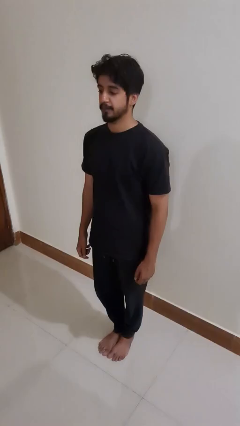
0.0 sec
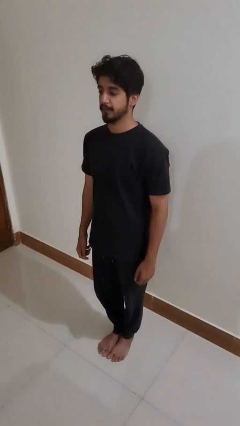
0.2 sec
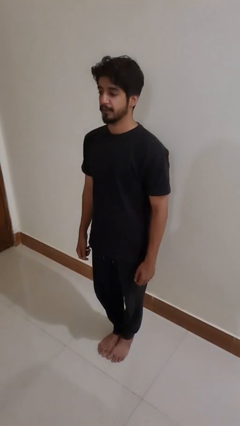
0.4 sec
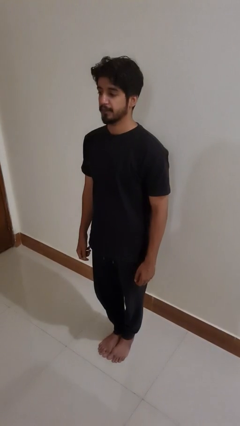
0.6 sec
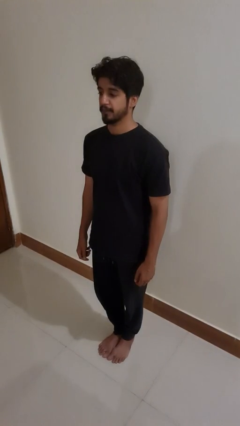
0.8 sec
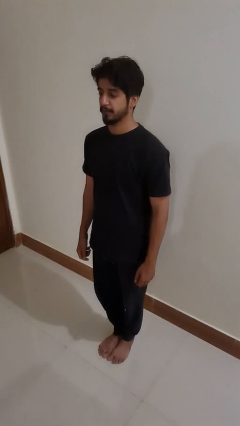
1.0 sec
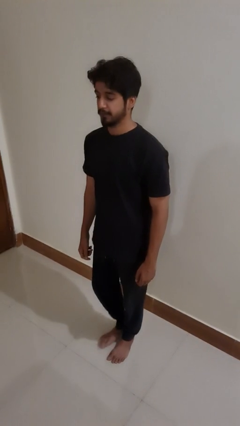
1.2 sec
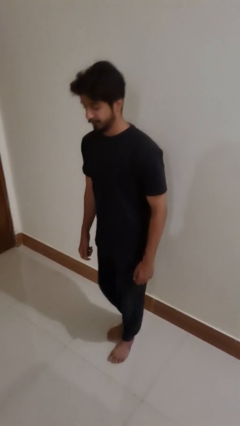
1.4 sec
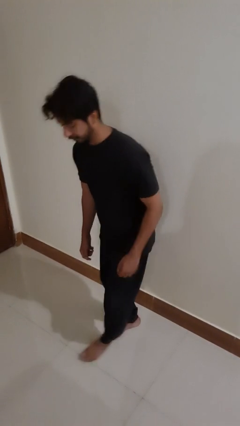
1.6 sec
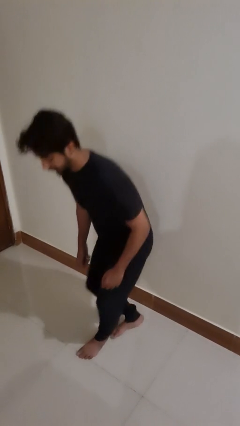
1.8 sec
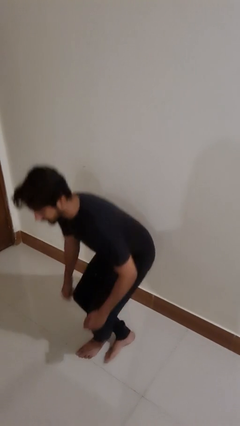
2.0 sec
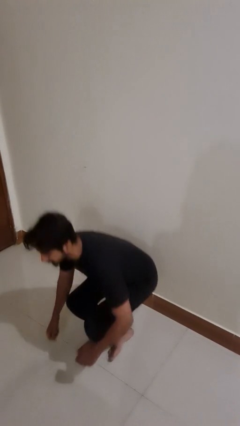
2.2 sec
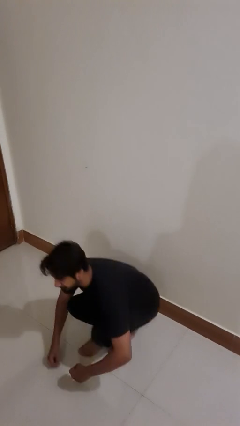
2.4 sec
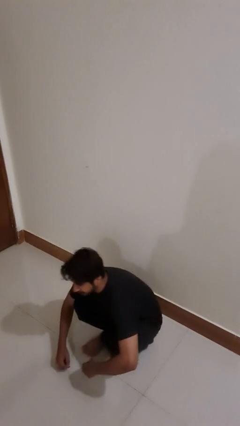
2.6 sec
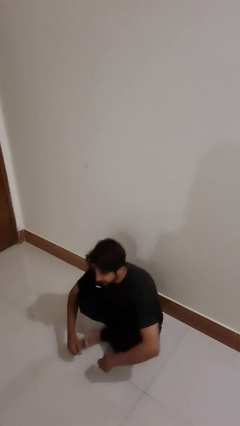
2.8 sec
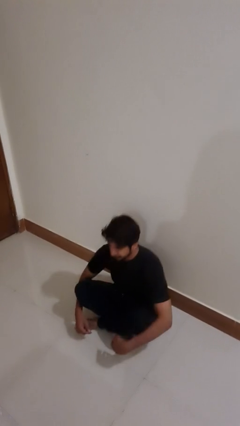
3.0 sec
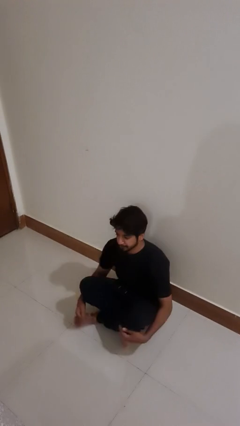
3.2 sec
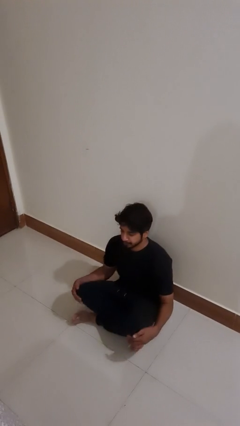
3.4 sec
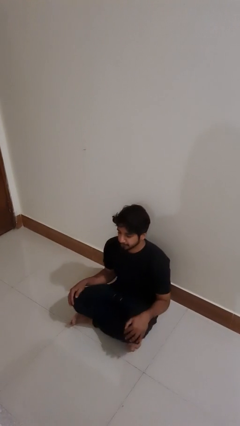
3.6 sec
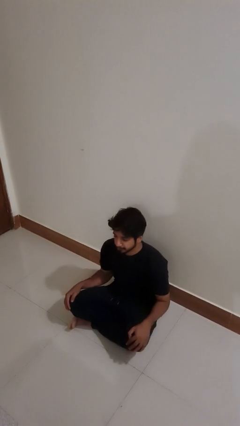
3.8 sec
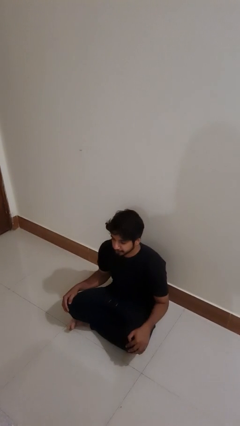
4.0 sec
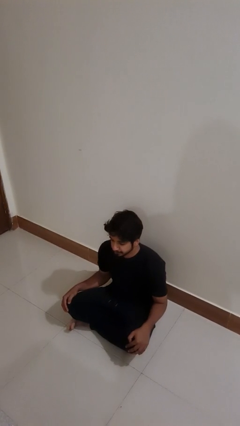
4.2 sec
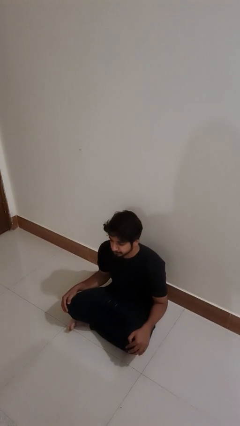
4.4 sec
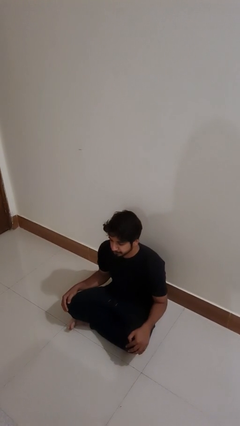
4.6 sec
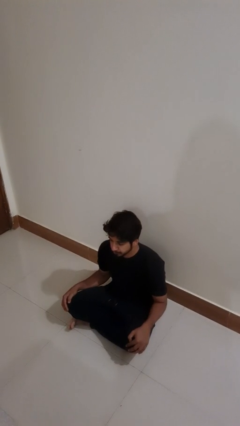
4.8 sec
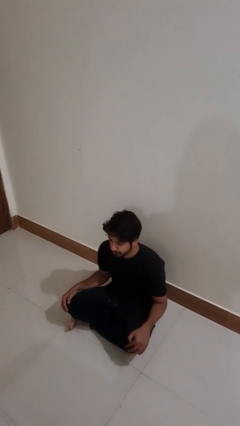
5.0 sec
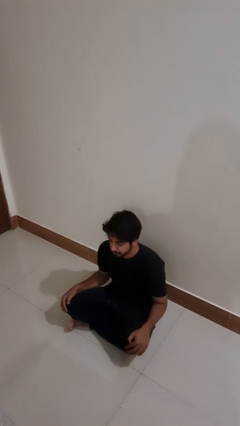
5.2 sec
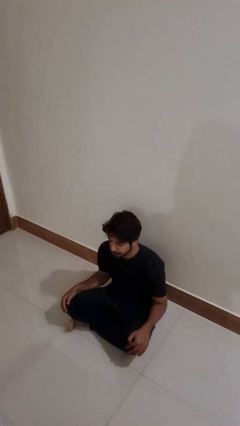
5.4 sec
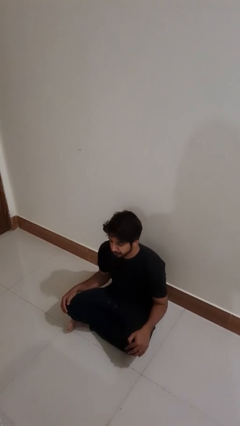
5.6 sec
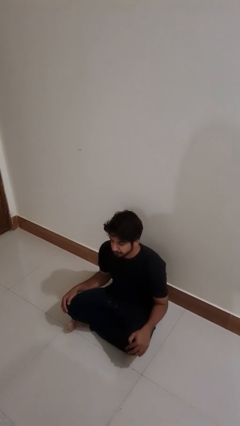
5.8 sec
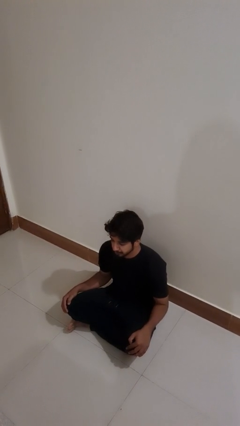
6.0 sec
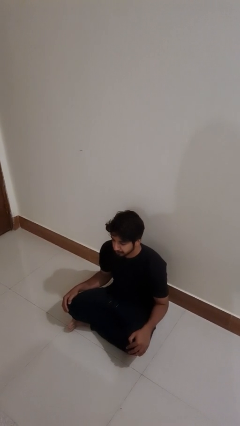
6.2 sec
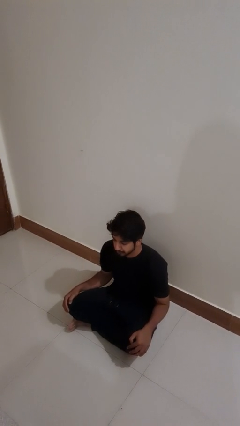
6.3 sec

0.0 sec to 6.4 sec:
person sits crisscross

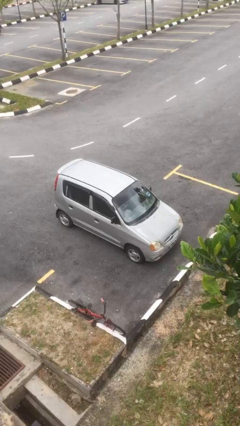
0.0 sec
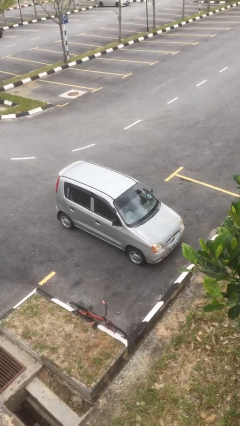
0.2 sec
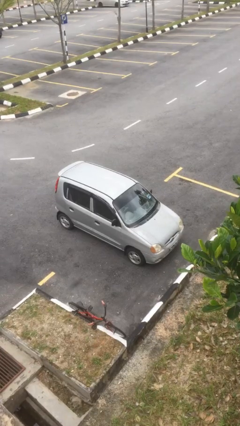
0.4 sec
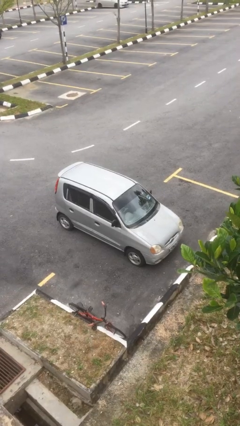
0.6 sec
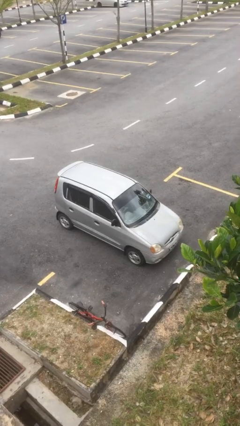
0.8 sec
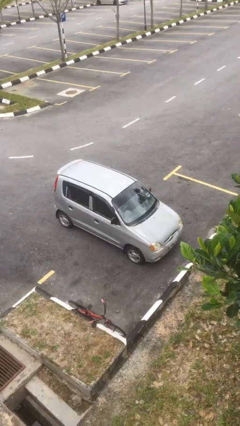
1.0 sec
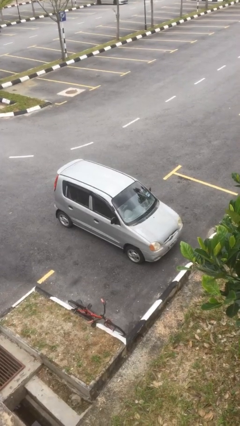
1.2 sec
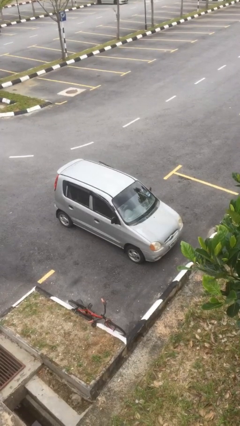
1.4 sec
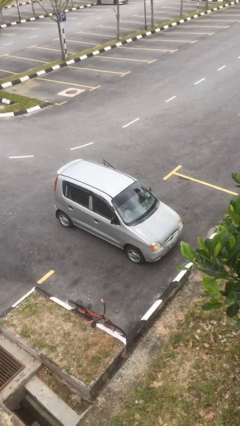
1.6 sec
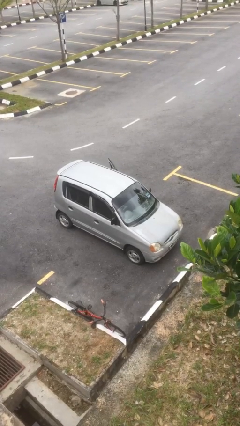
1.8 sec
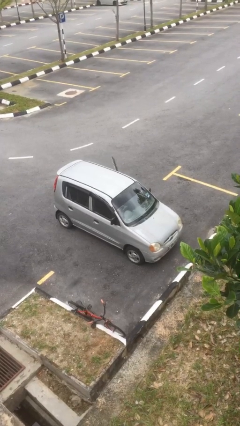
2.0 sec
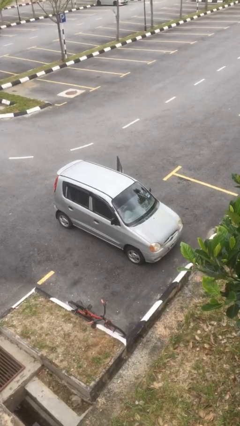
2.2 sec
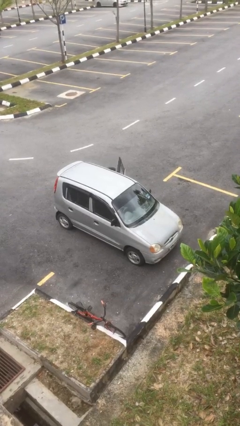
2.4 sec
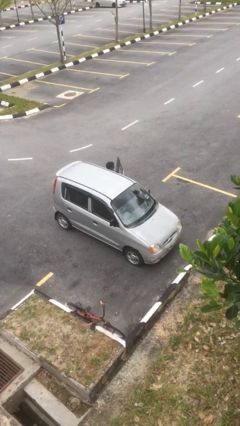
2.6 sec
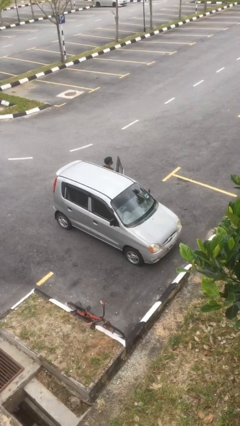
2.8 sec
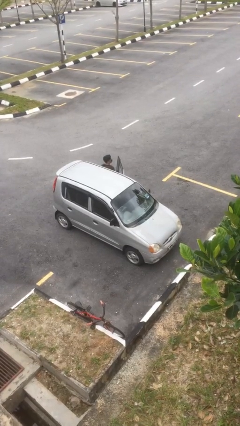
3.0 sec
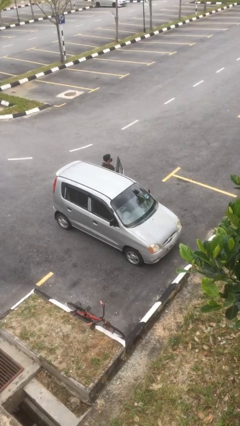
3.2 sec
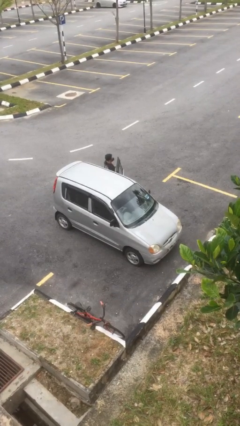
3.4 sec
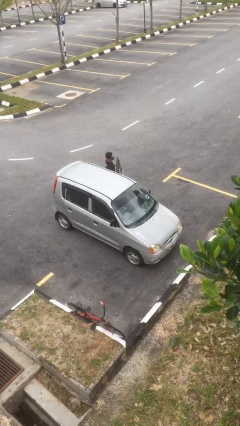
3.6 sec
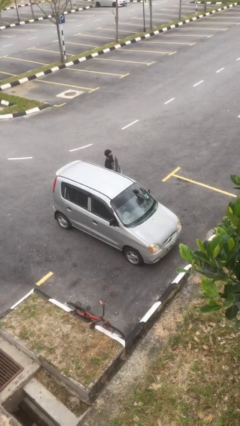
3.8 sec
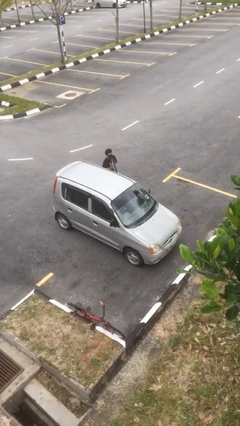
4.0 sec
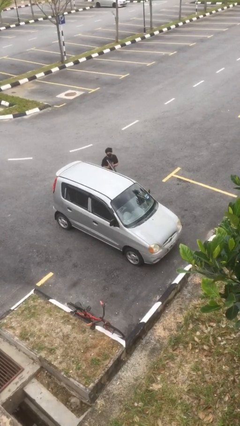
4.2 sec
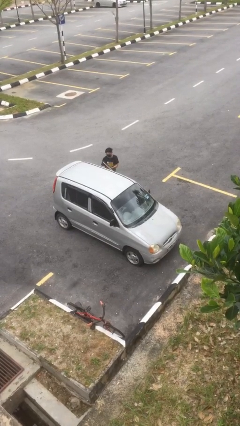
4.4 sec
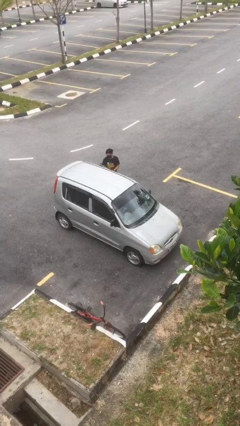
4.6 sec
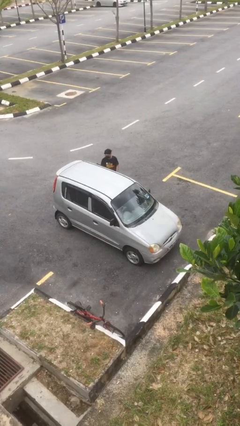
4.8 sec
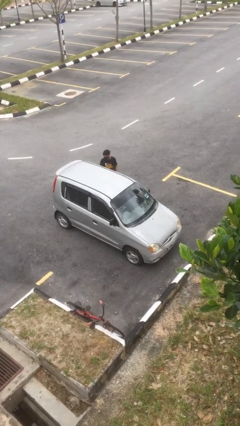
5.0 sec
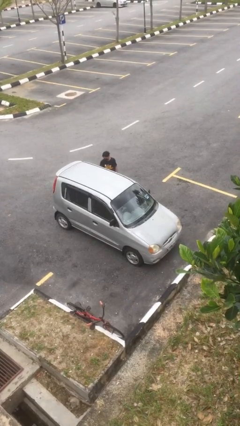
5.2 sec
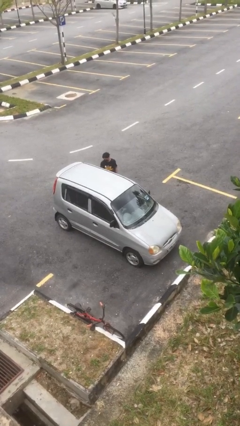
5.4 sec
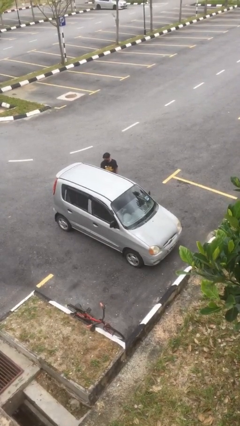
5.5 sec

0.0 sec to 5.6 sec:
car drops off person

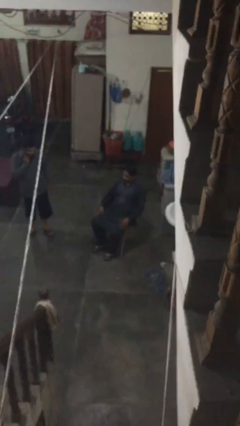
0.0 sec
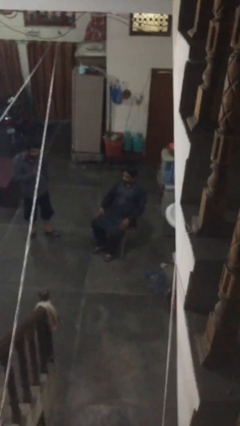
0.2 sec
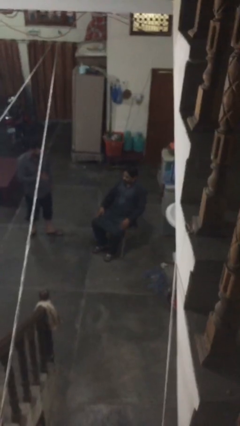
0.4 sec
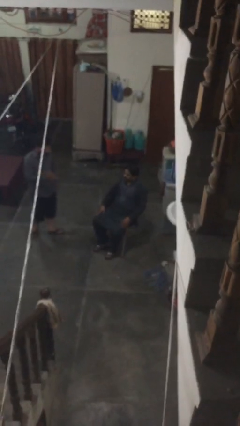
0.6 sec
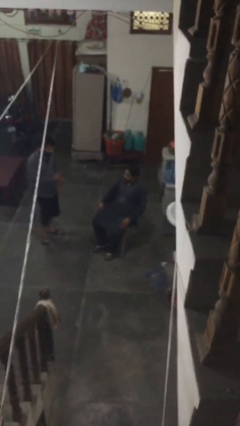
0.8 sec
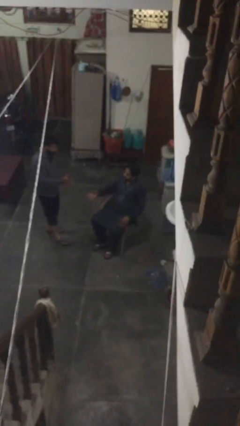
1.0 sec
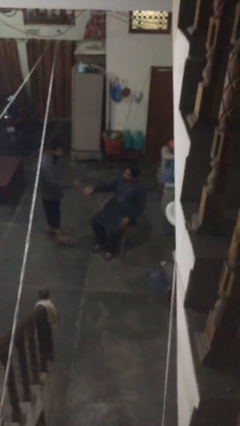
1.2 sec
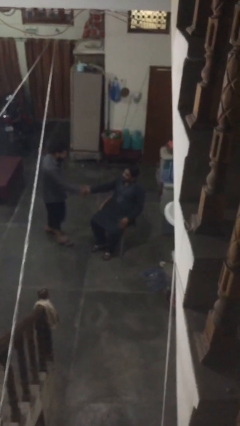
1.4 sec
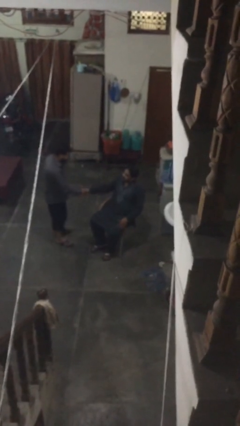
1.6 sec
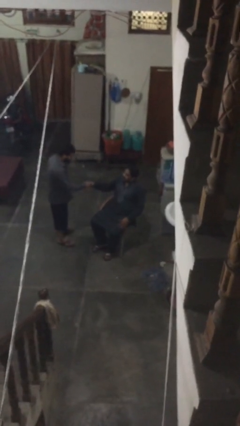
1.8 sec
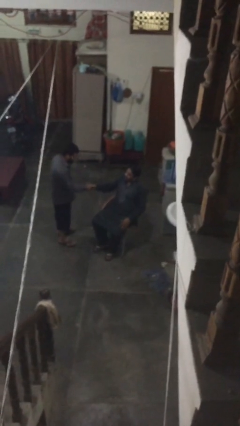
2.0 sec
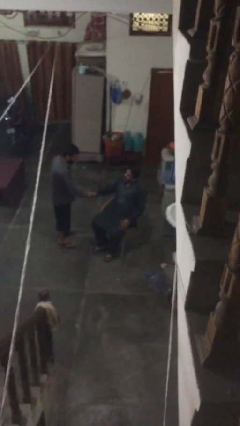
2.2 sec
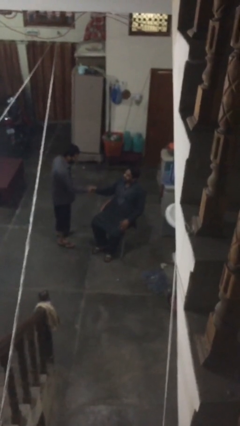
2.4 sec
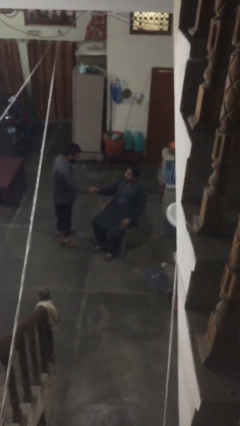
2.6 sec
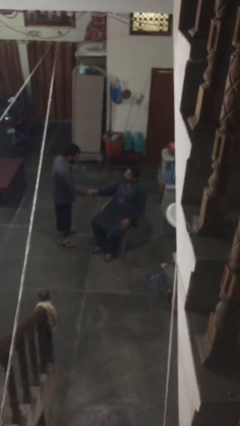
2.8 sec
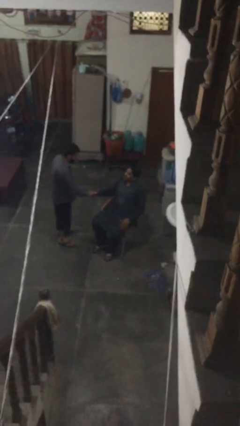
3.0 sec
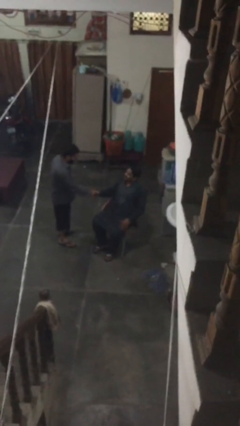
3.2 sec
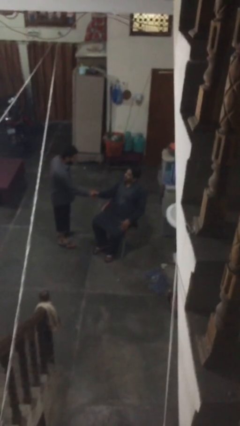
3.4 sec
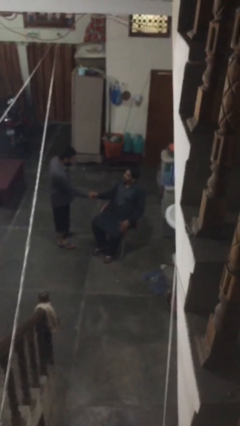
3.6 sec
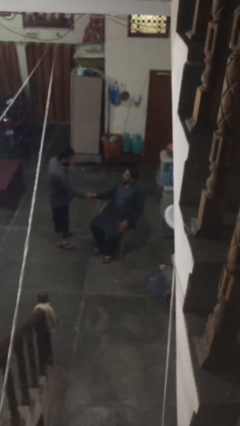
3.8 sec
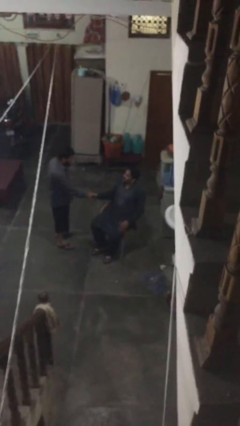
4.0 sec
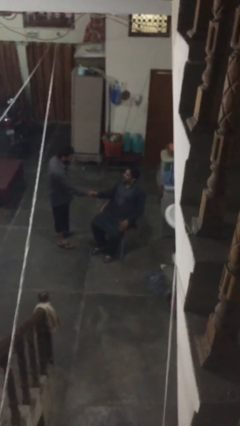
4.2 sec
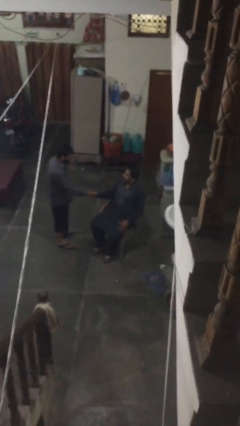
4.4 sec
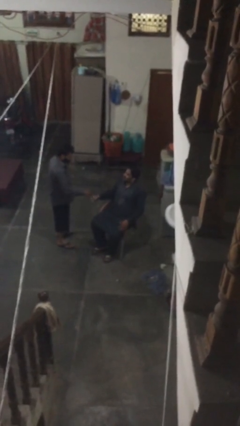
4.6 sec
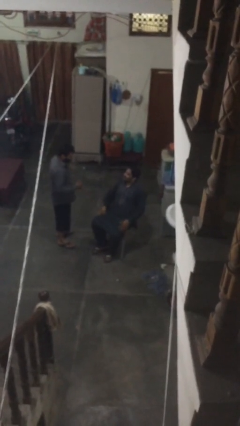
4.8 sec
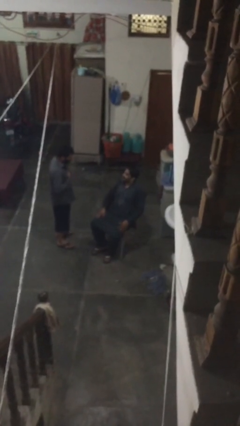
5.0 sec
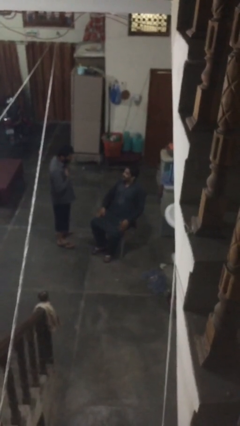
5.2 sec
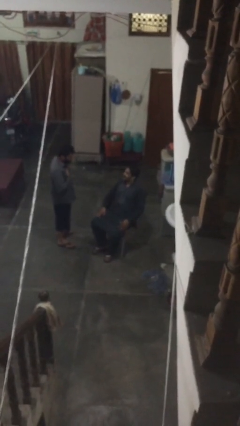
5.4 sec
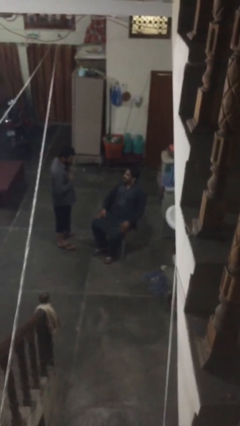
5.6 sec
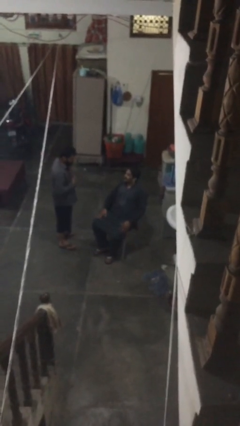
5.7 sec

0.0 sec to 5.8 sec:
person shakes hand
